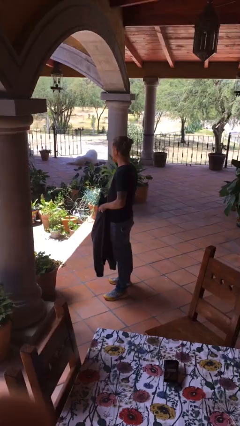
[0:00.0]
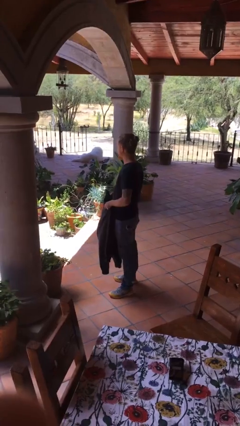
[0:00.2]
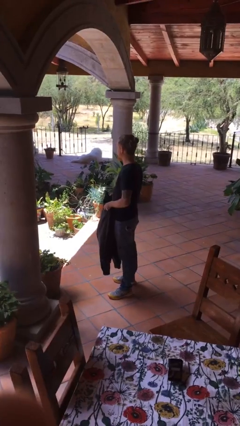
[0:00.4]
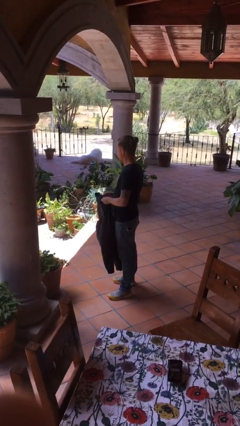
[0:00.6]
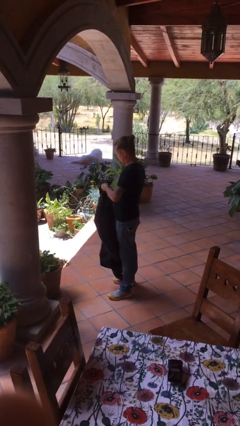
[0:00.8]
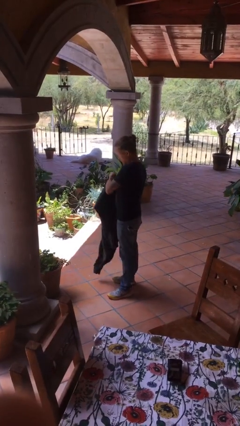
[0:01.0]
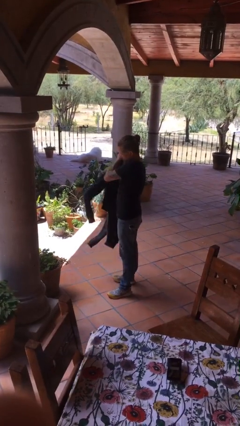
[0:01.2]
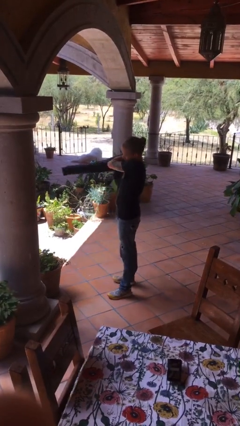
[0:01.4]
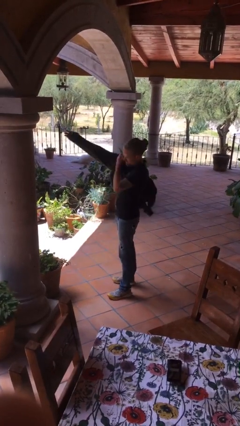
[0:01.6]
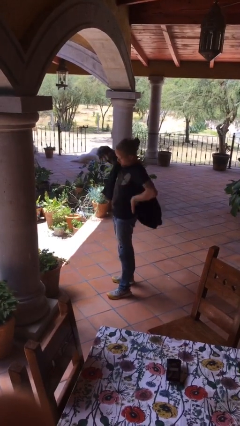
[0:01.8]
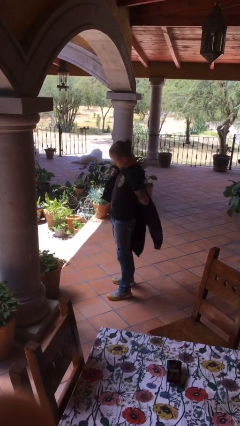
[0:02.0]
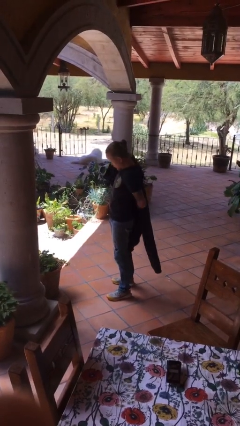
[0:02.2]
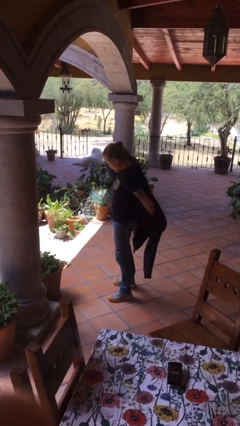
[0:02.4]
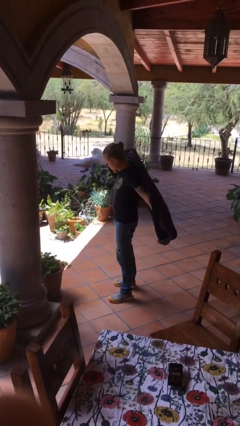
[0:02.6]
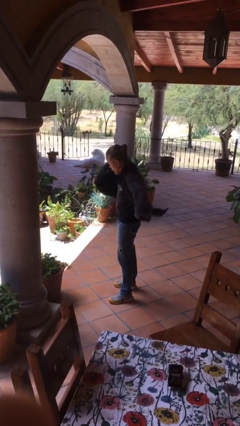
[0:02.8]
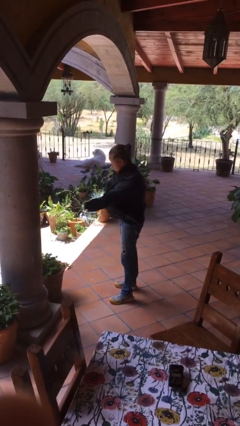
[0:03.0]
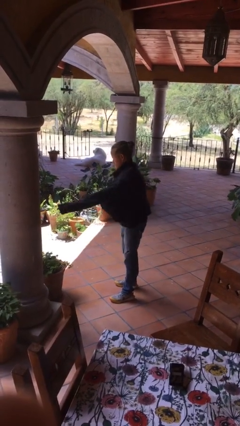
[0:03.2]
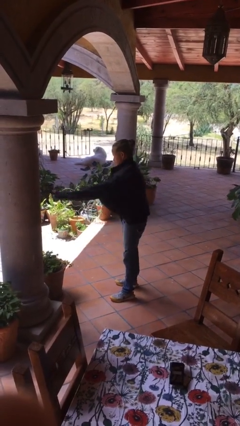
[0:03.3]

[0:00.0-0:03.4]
person puts on jacket

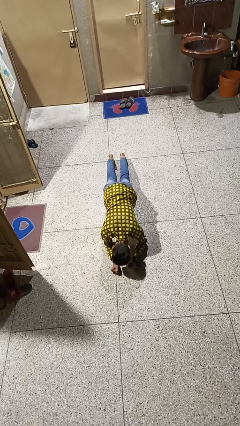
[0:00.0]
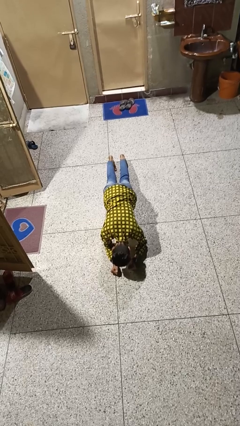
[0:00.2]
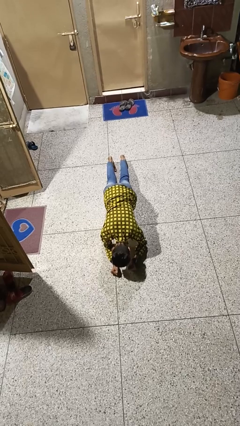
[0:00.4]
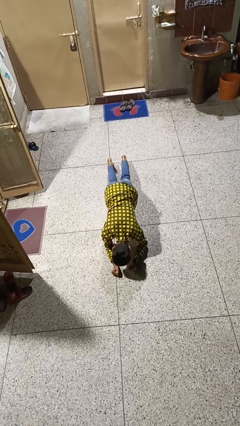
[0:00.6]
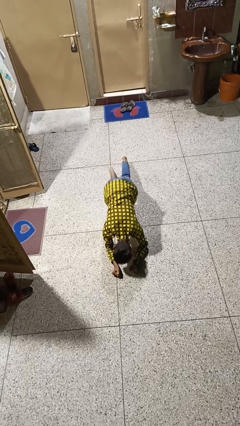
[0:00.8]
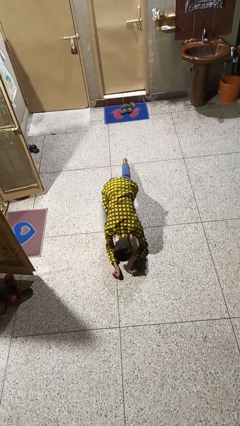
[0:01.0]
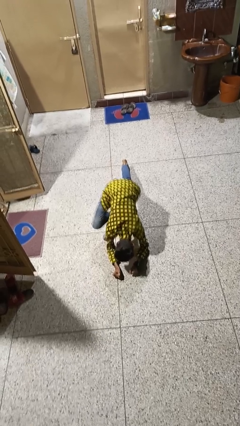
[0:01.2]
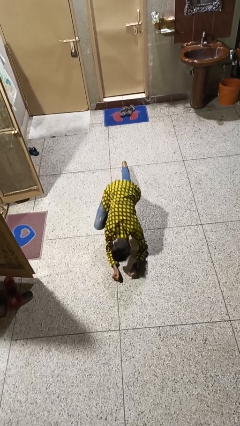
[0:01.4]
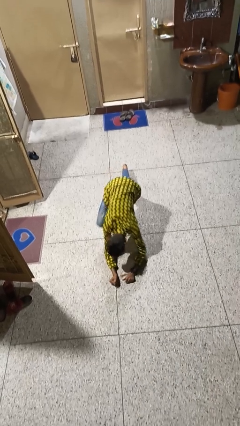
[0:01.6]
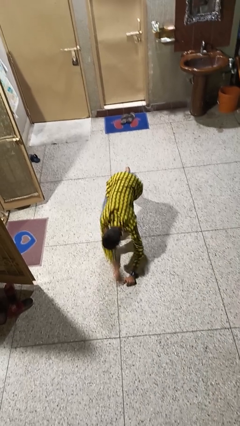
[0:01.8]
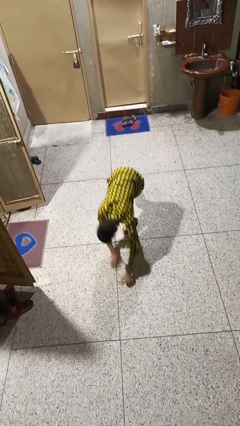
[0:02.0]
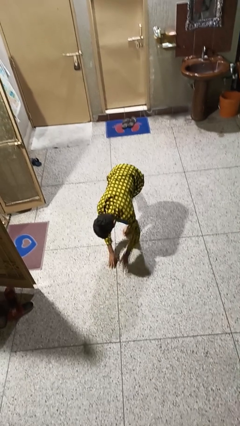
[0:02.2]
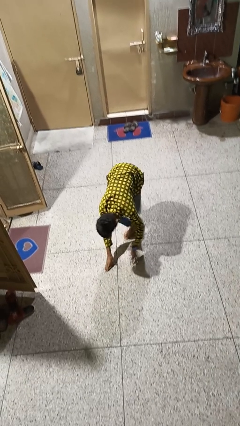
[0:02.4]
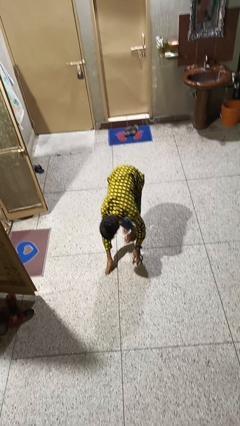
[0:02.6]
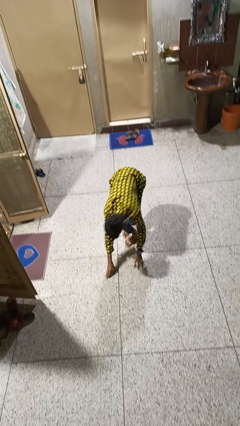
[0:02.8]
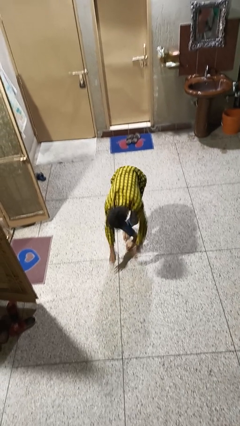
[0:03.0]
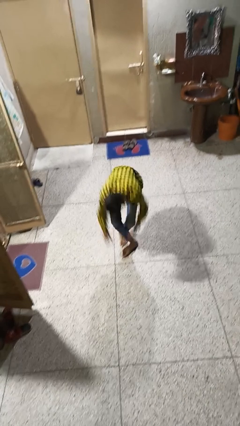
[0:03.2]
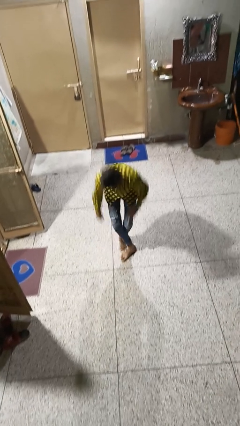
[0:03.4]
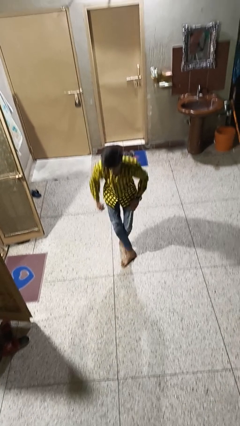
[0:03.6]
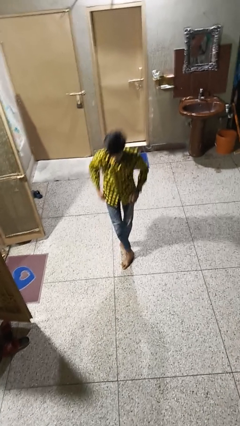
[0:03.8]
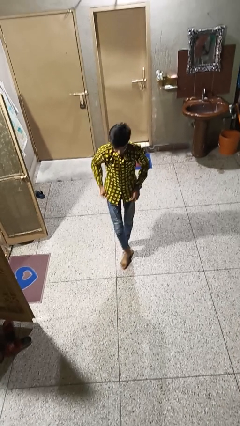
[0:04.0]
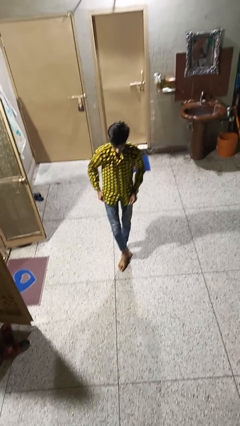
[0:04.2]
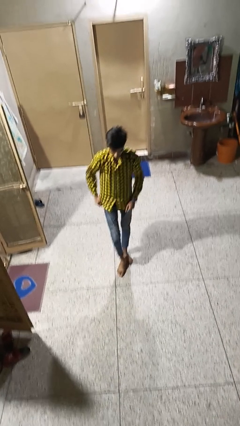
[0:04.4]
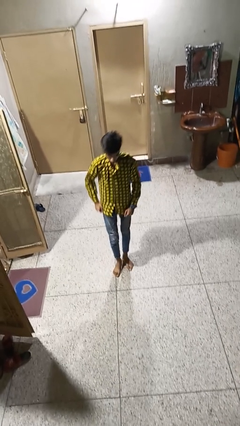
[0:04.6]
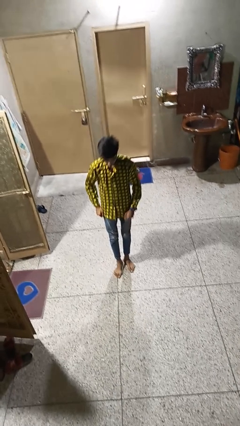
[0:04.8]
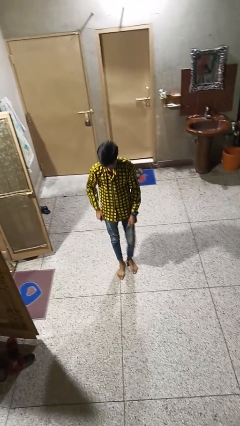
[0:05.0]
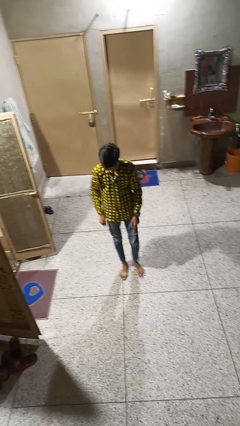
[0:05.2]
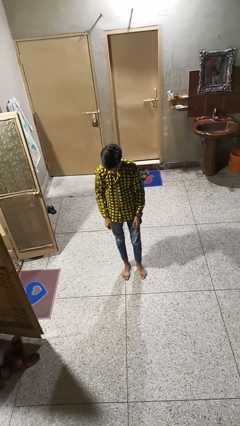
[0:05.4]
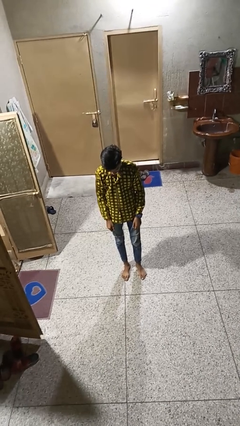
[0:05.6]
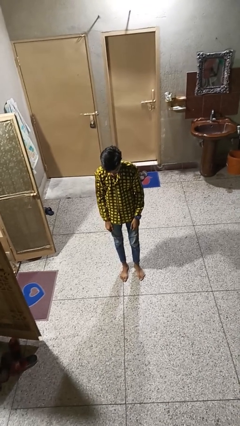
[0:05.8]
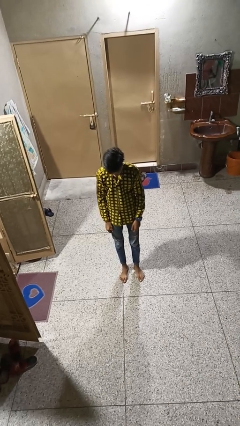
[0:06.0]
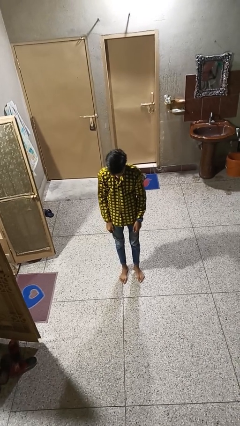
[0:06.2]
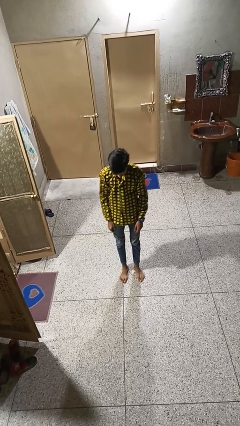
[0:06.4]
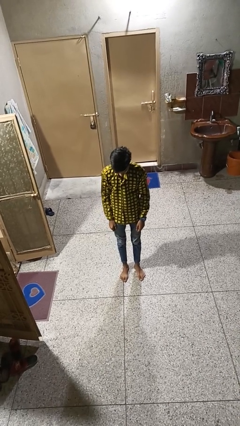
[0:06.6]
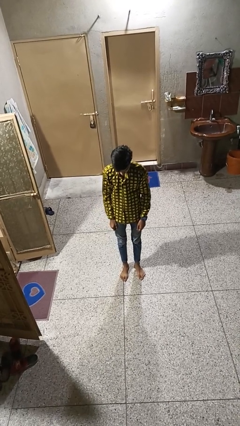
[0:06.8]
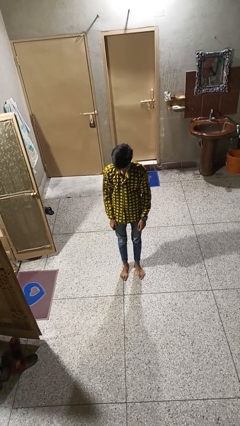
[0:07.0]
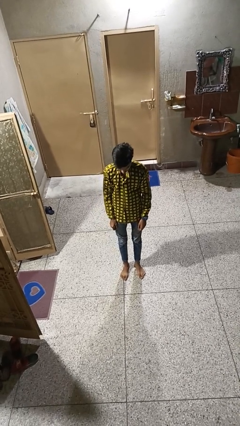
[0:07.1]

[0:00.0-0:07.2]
person stands up from floor

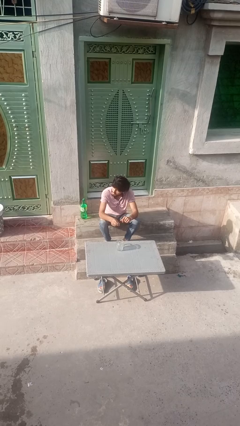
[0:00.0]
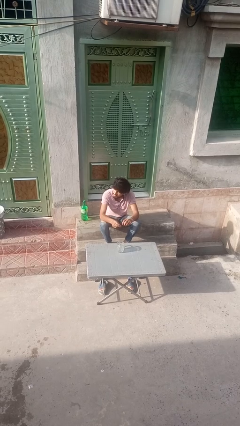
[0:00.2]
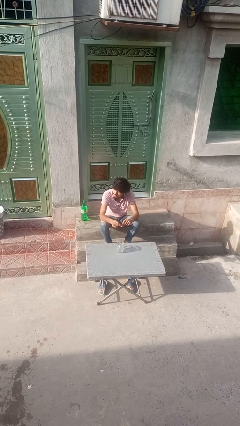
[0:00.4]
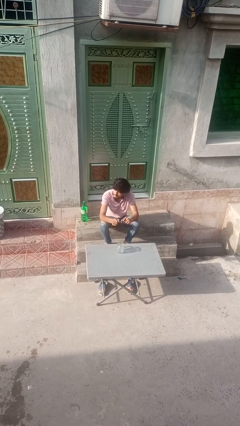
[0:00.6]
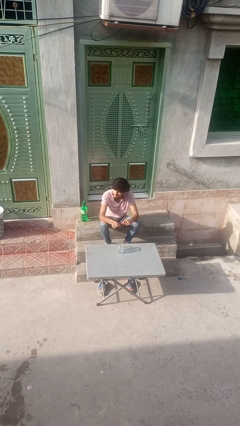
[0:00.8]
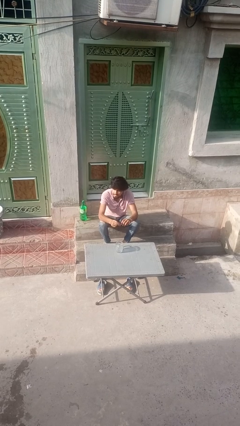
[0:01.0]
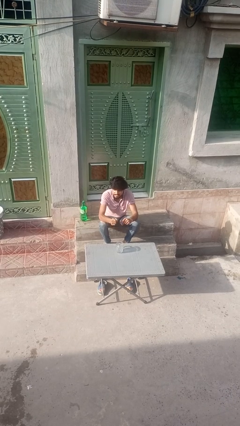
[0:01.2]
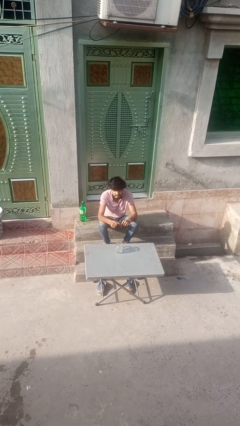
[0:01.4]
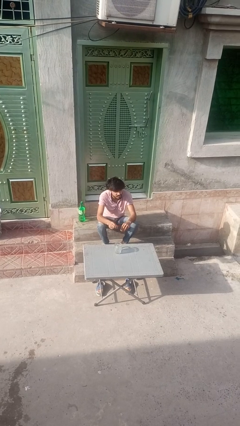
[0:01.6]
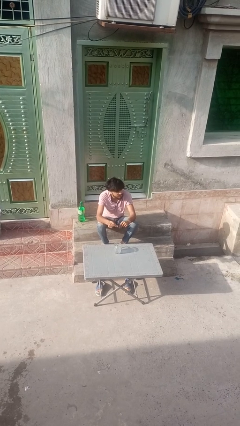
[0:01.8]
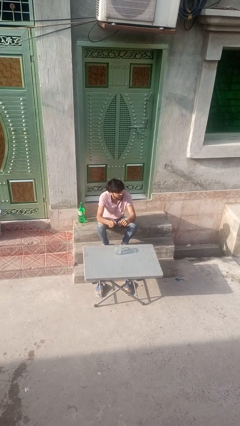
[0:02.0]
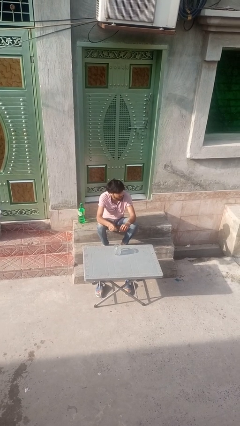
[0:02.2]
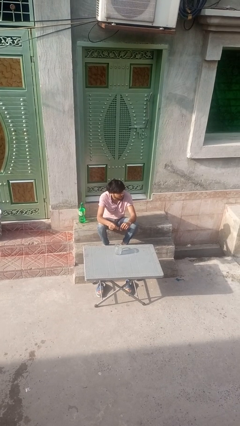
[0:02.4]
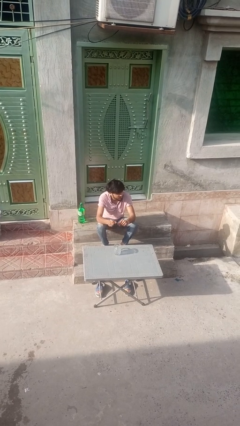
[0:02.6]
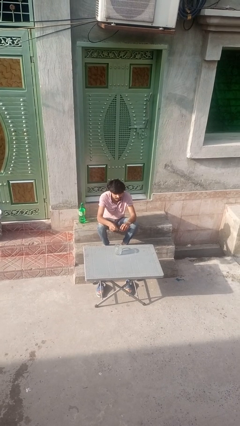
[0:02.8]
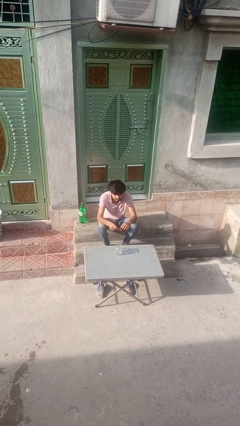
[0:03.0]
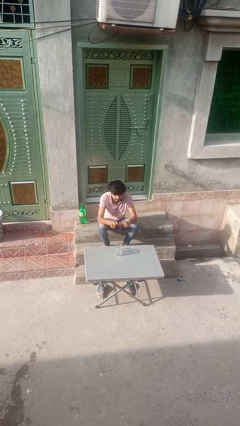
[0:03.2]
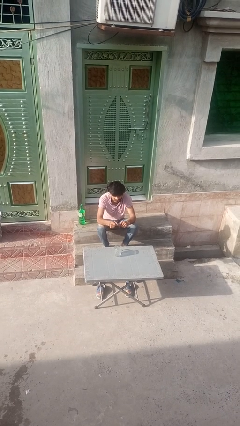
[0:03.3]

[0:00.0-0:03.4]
person snaps fingers

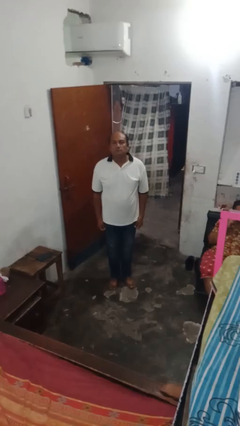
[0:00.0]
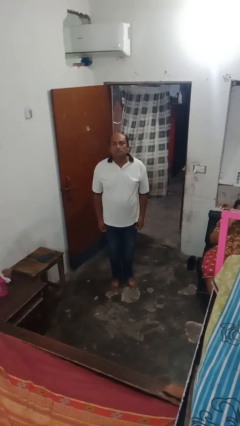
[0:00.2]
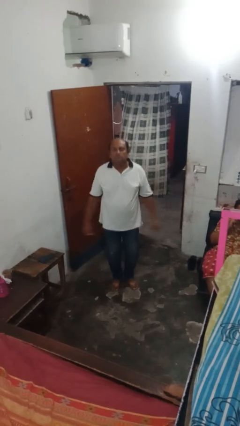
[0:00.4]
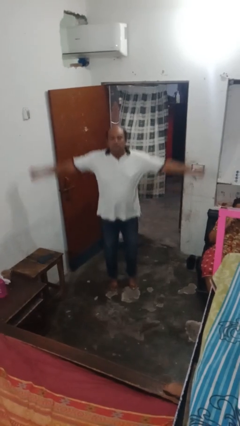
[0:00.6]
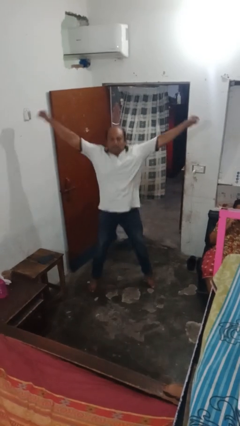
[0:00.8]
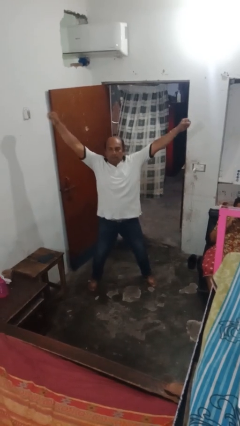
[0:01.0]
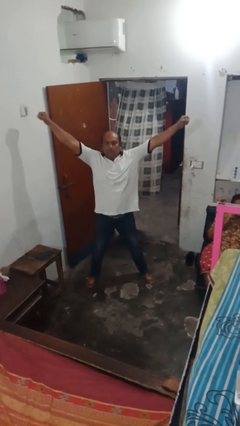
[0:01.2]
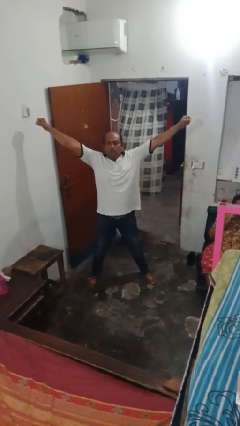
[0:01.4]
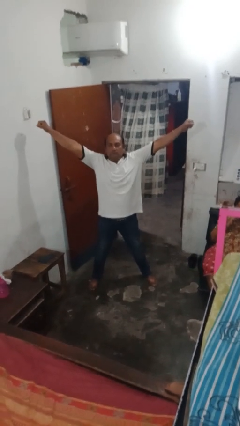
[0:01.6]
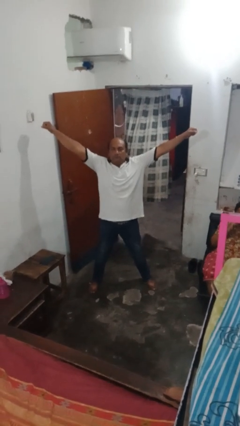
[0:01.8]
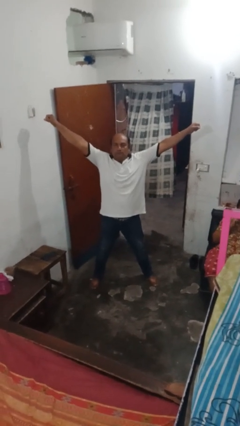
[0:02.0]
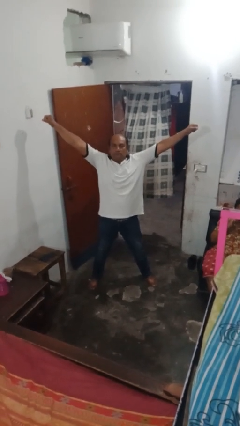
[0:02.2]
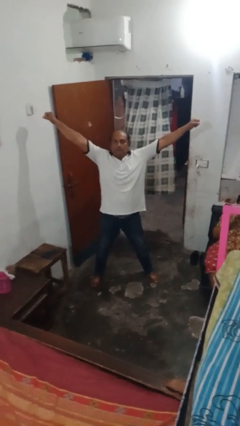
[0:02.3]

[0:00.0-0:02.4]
person exercises with jumping jacks

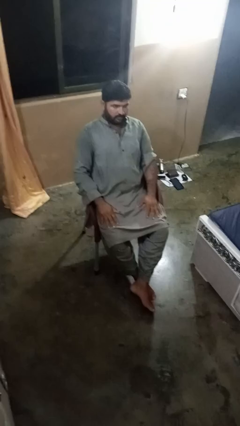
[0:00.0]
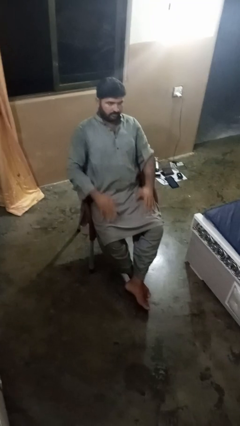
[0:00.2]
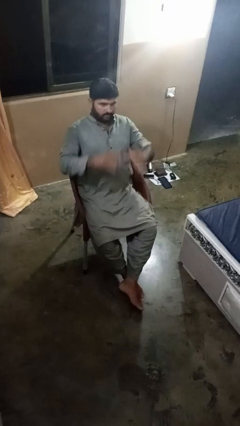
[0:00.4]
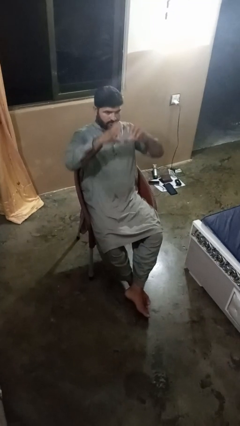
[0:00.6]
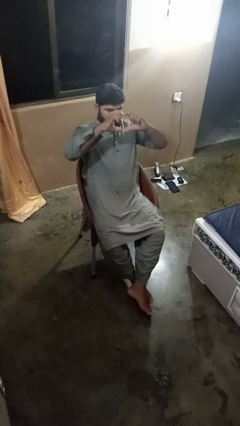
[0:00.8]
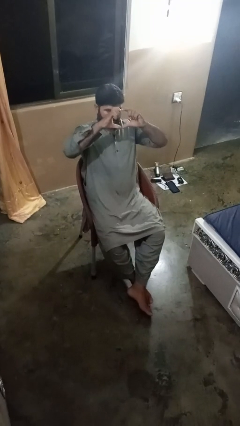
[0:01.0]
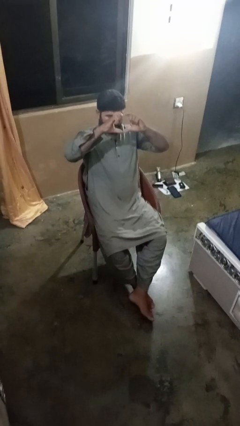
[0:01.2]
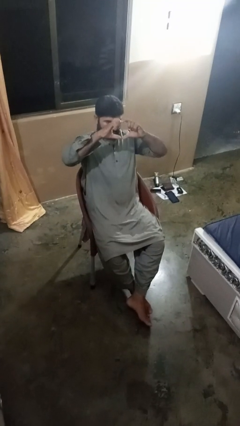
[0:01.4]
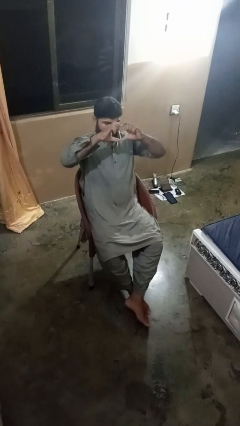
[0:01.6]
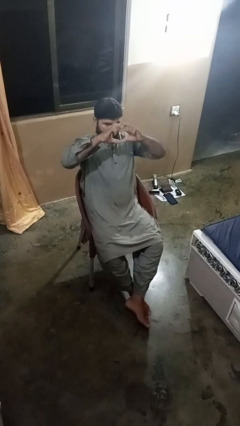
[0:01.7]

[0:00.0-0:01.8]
person gestures heart
